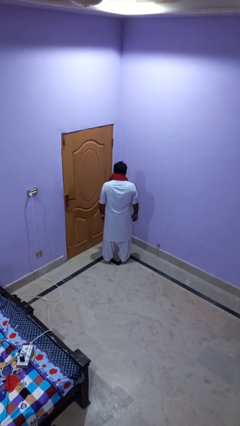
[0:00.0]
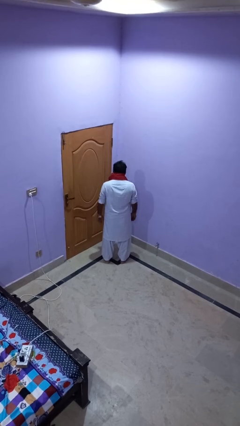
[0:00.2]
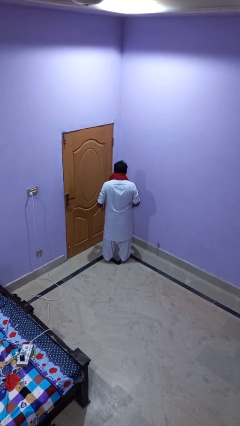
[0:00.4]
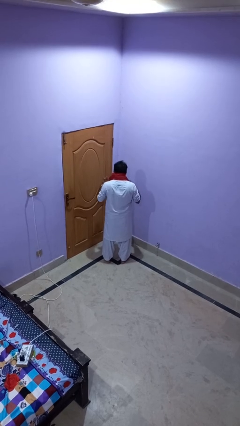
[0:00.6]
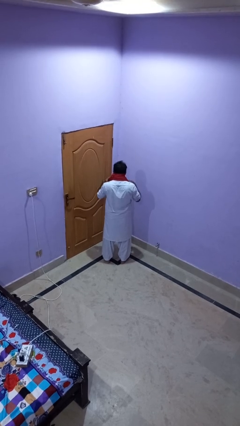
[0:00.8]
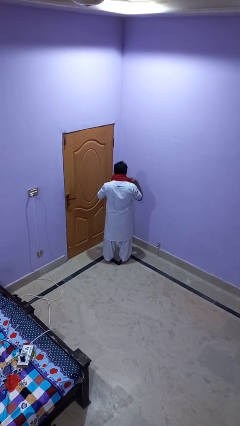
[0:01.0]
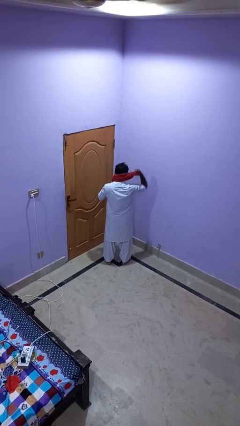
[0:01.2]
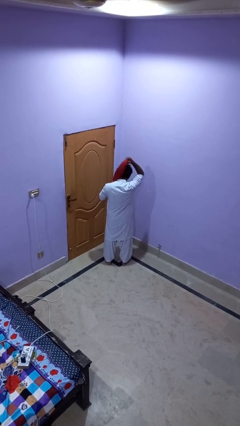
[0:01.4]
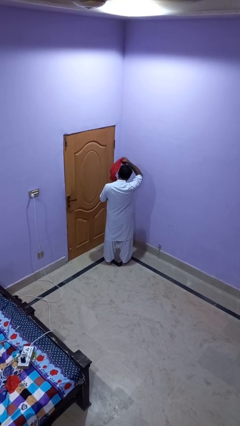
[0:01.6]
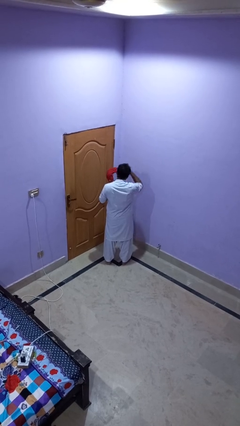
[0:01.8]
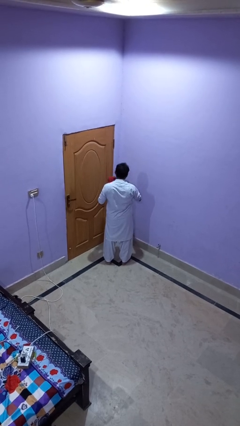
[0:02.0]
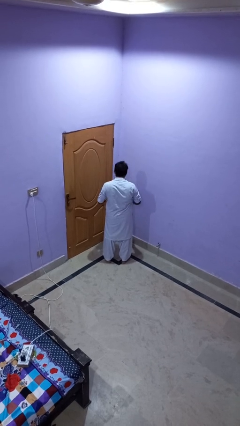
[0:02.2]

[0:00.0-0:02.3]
person takes off scarf

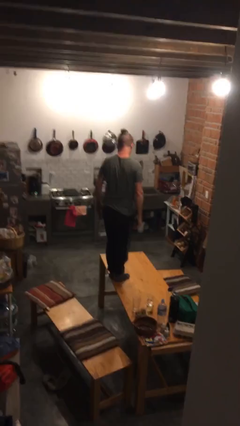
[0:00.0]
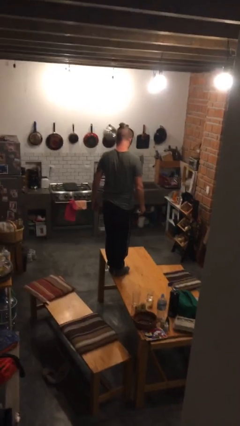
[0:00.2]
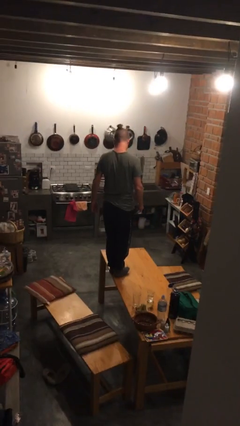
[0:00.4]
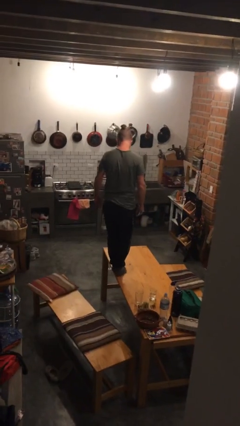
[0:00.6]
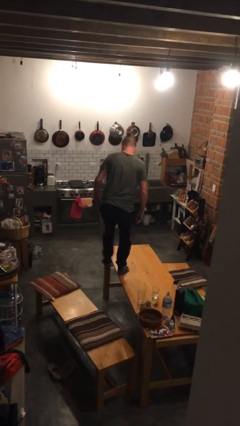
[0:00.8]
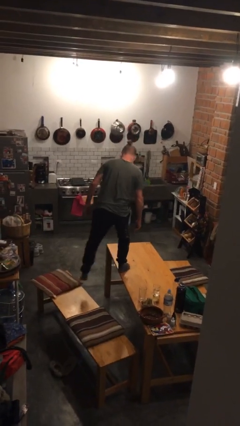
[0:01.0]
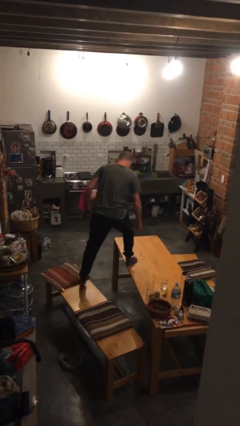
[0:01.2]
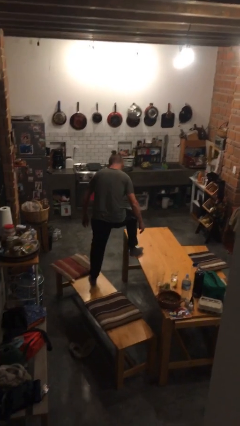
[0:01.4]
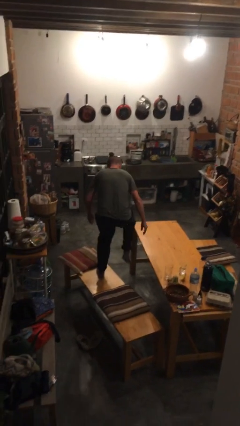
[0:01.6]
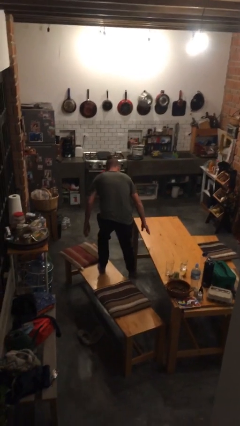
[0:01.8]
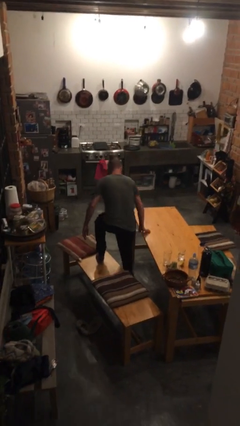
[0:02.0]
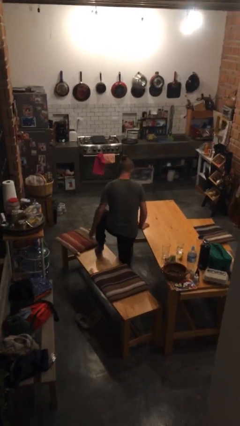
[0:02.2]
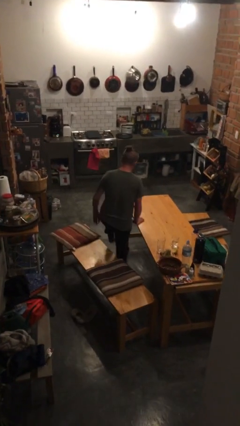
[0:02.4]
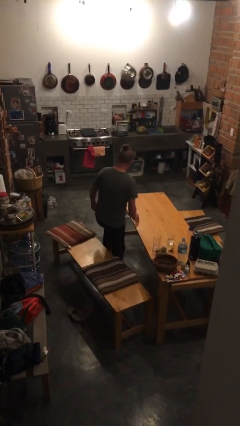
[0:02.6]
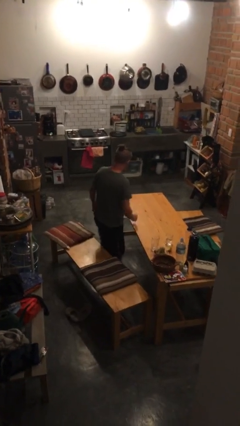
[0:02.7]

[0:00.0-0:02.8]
person climbs off table

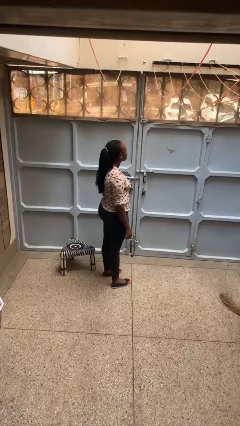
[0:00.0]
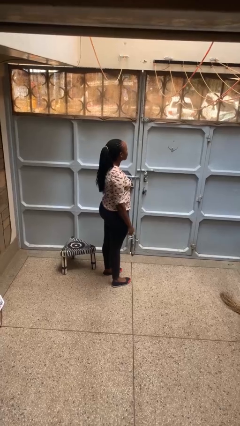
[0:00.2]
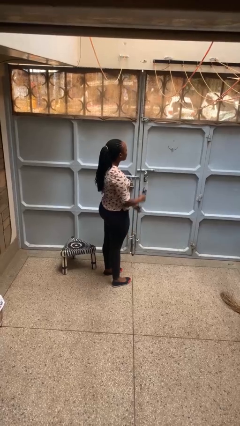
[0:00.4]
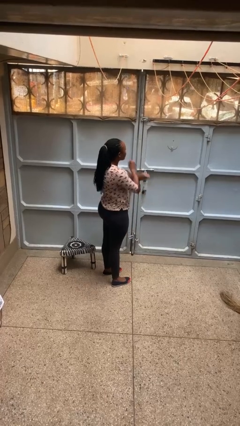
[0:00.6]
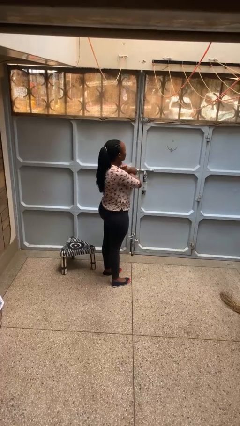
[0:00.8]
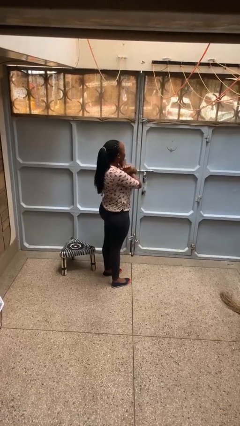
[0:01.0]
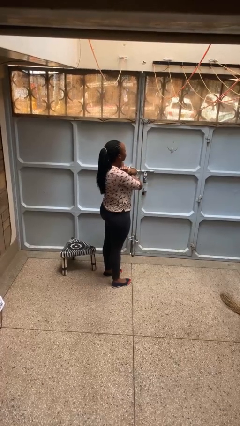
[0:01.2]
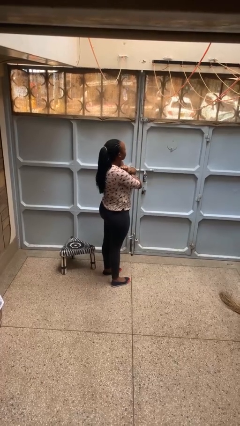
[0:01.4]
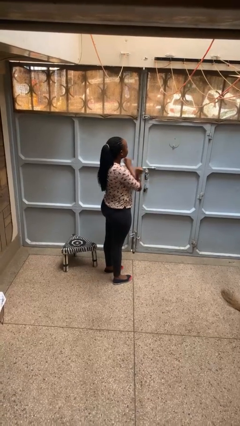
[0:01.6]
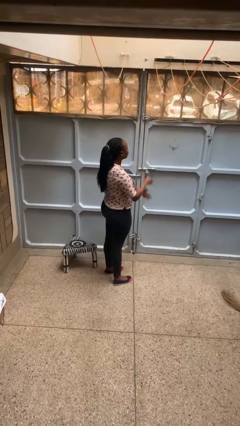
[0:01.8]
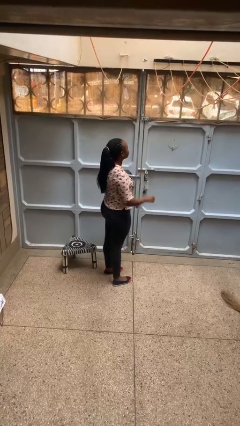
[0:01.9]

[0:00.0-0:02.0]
person gestures arms x

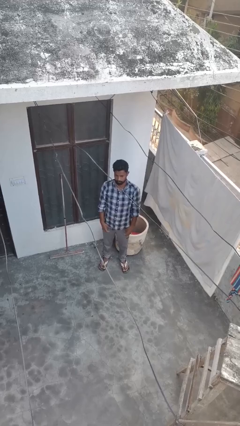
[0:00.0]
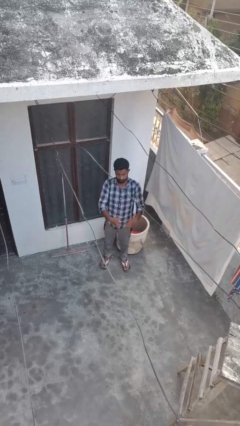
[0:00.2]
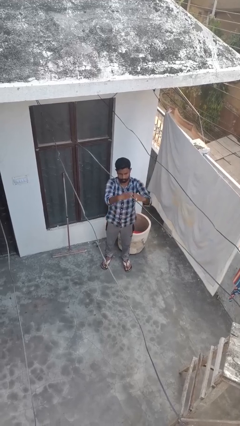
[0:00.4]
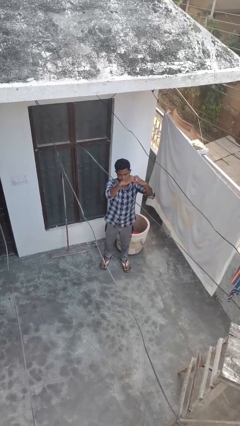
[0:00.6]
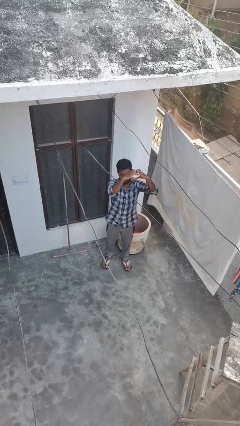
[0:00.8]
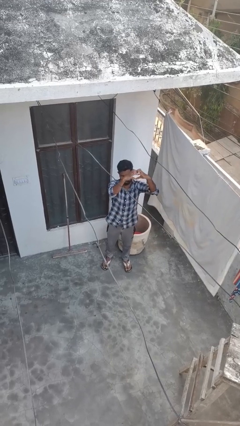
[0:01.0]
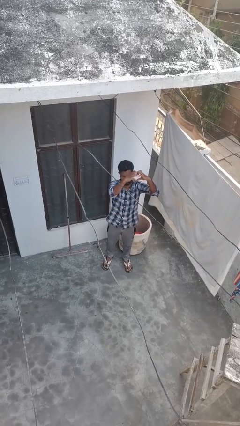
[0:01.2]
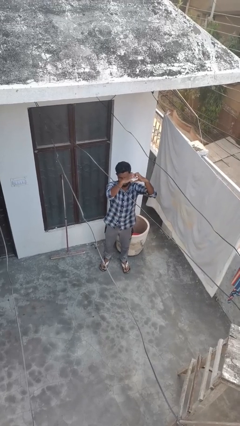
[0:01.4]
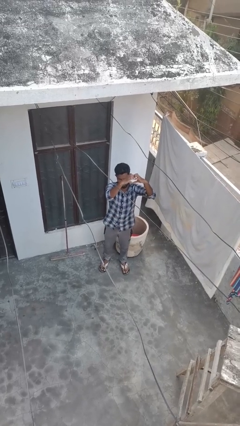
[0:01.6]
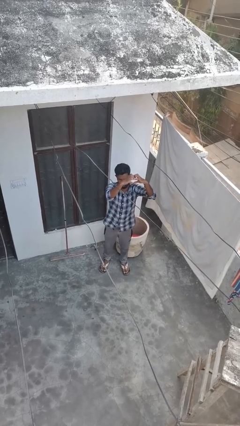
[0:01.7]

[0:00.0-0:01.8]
person gestures heart

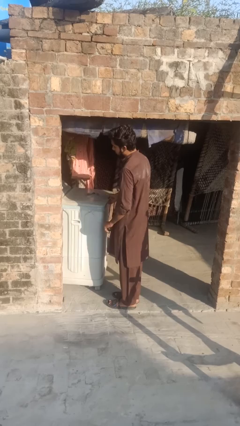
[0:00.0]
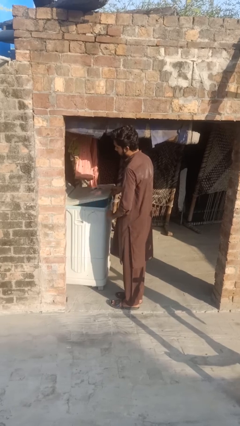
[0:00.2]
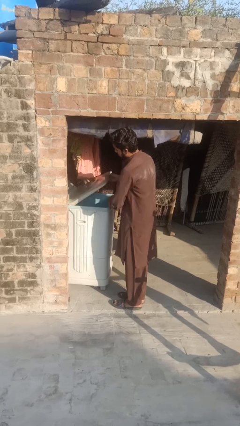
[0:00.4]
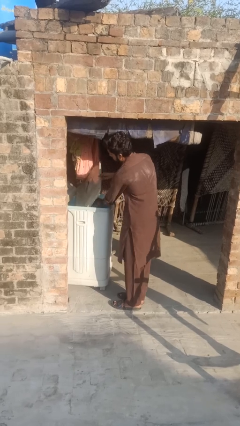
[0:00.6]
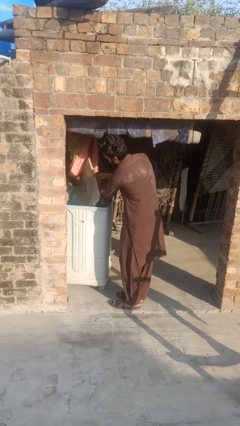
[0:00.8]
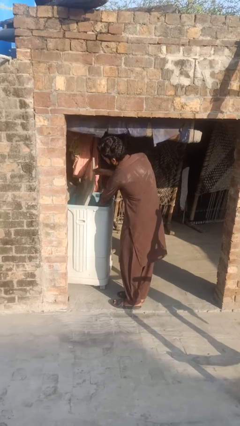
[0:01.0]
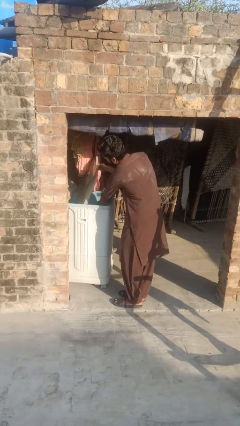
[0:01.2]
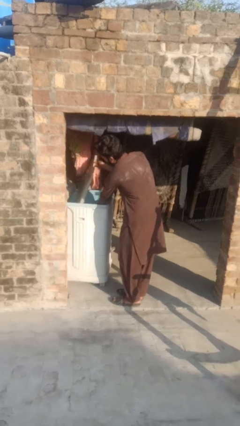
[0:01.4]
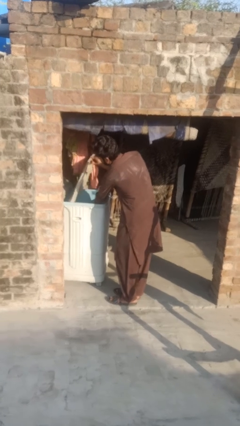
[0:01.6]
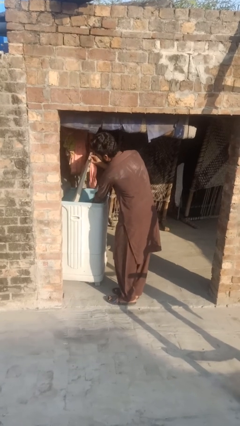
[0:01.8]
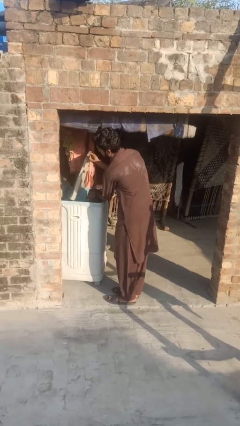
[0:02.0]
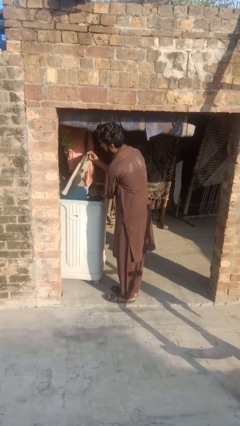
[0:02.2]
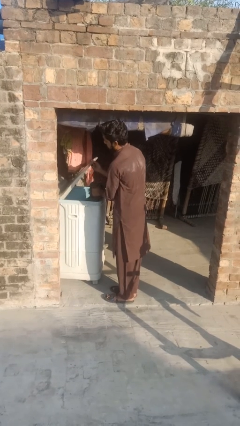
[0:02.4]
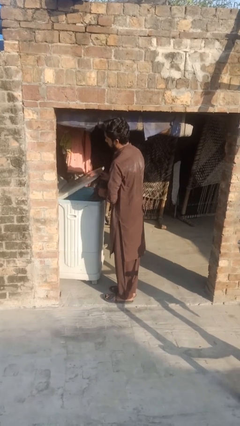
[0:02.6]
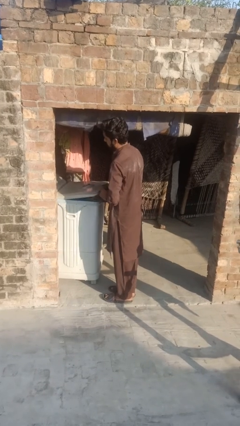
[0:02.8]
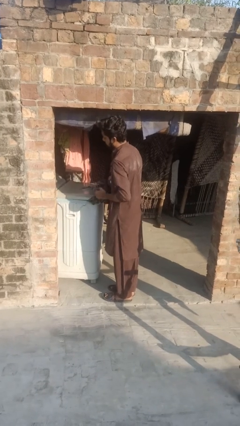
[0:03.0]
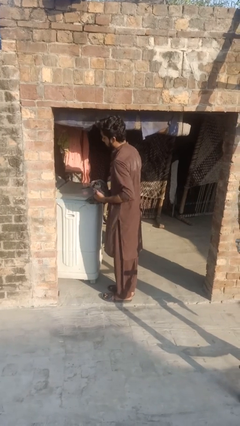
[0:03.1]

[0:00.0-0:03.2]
person unloads dryer

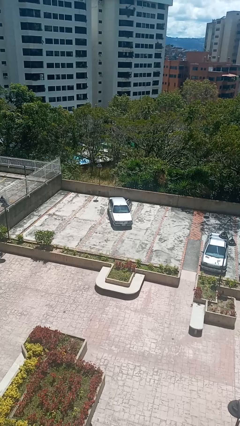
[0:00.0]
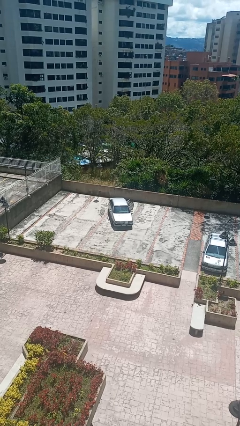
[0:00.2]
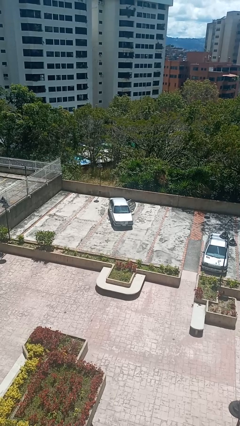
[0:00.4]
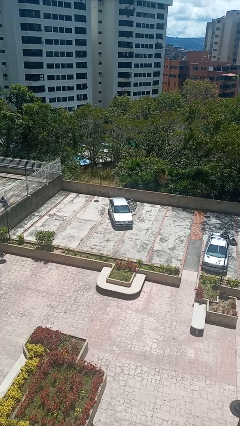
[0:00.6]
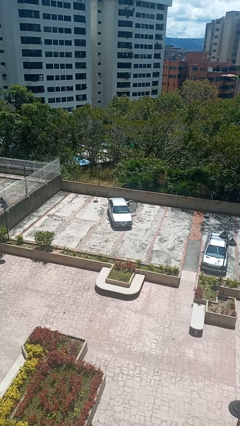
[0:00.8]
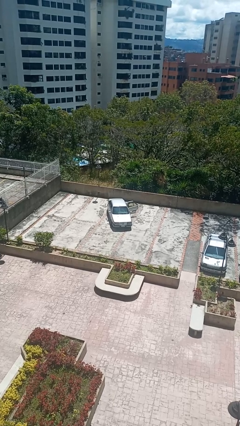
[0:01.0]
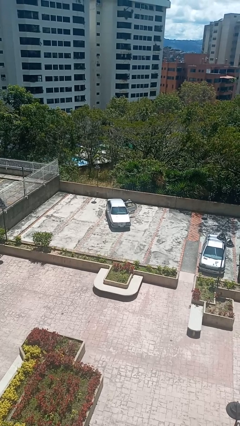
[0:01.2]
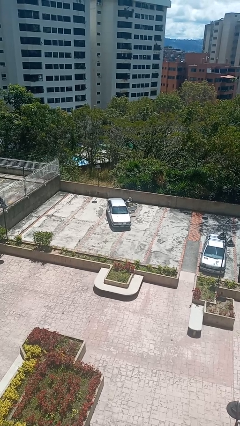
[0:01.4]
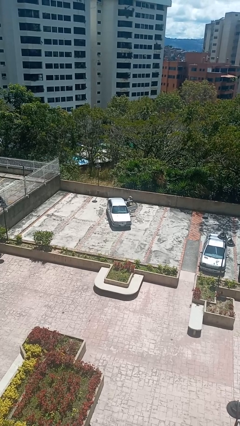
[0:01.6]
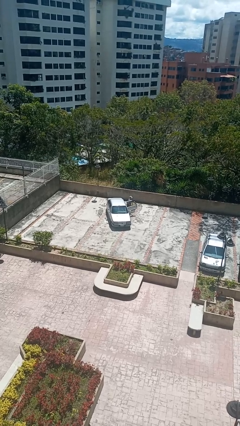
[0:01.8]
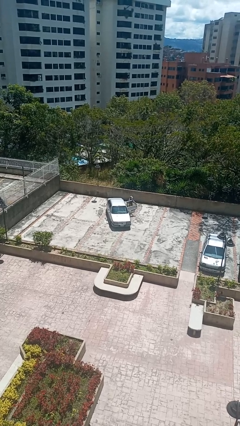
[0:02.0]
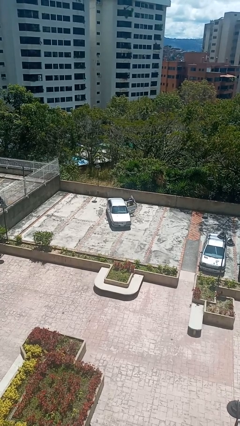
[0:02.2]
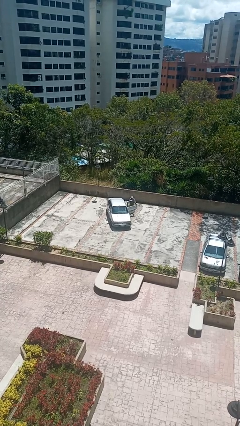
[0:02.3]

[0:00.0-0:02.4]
car drops off person

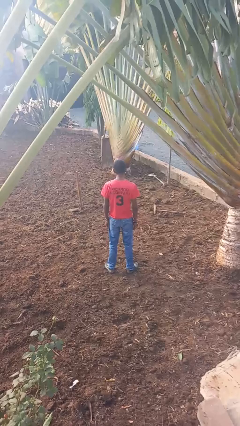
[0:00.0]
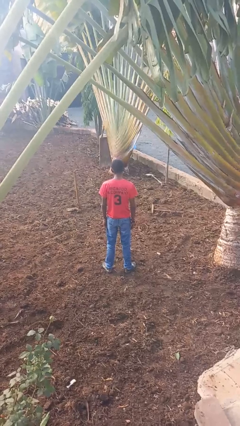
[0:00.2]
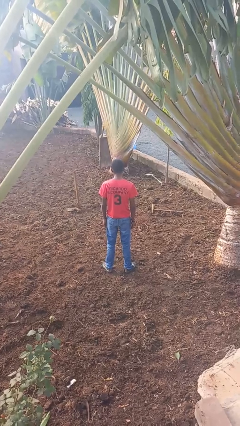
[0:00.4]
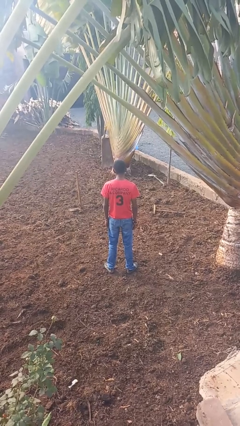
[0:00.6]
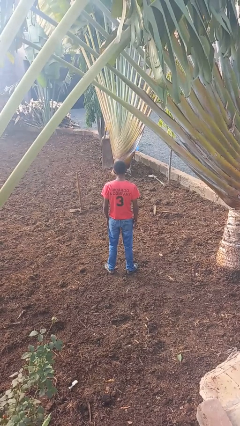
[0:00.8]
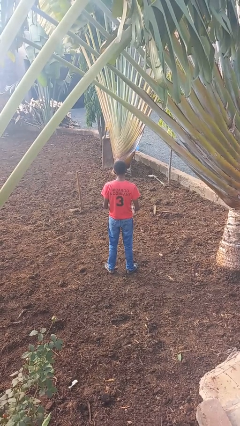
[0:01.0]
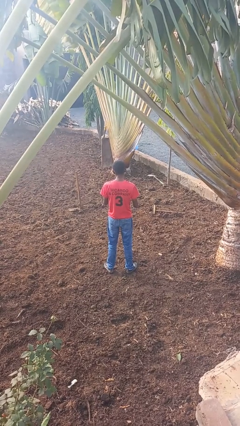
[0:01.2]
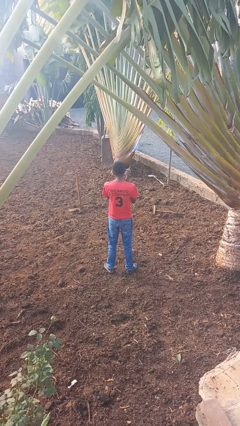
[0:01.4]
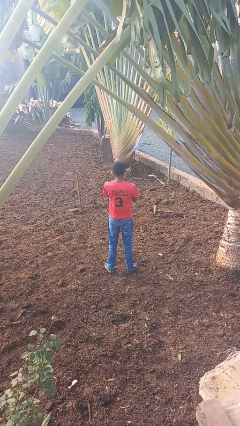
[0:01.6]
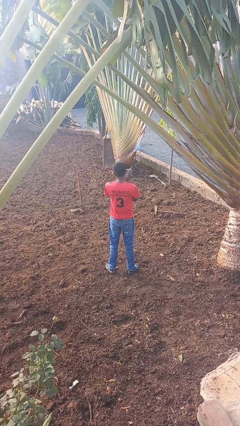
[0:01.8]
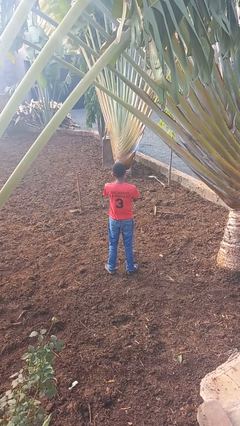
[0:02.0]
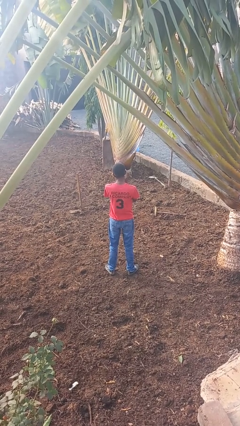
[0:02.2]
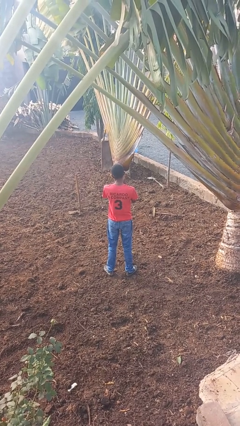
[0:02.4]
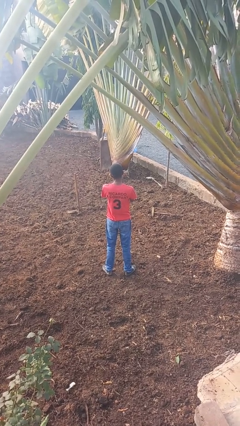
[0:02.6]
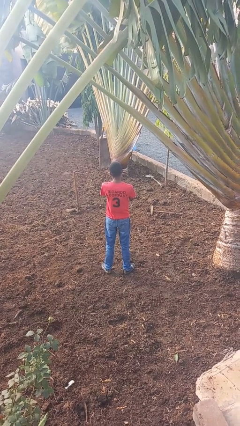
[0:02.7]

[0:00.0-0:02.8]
person claps hands
